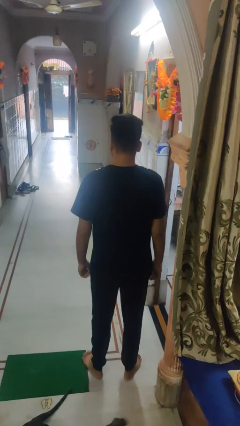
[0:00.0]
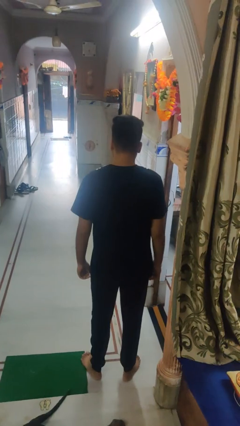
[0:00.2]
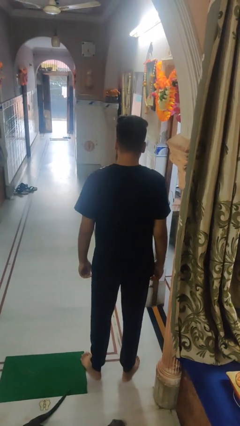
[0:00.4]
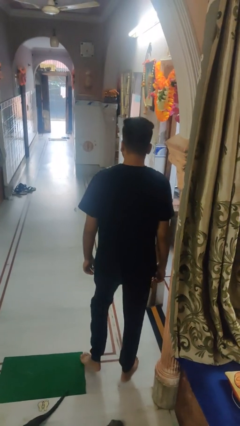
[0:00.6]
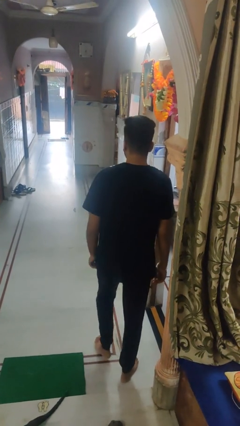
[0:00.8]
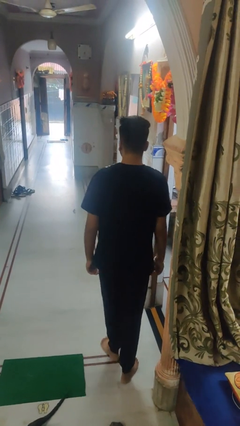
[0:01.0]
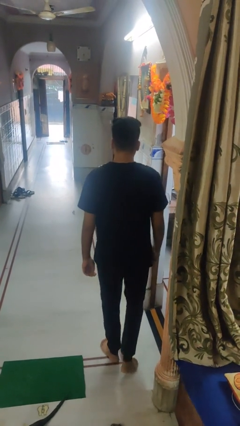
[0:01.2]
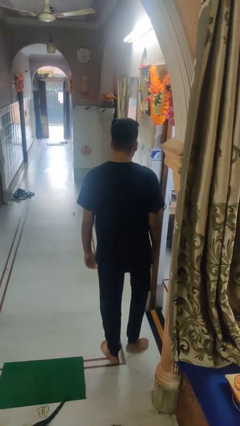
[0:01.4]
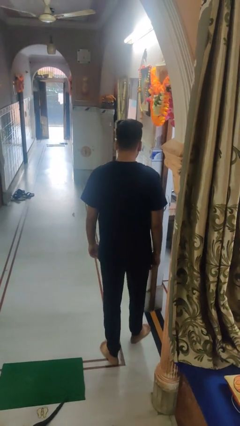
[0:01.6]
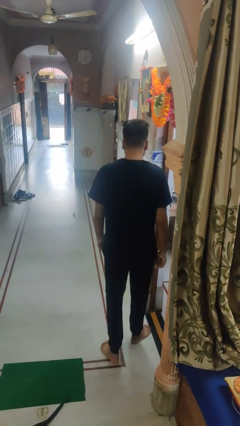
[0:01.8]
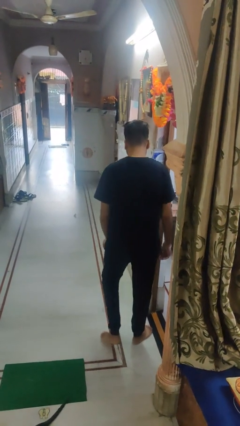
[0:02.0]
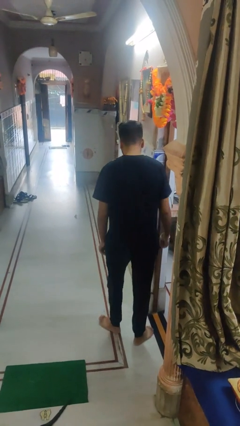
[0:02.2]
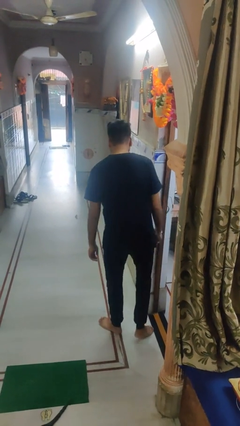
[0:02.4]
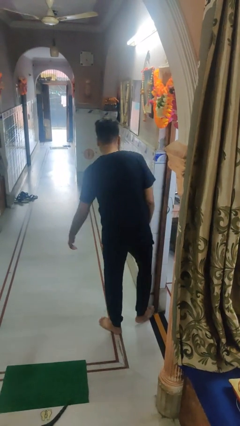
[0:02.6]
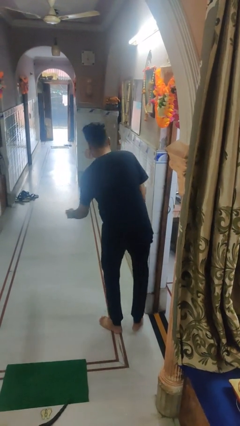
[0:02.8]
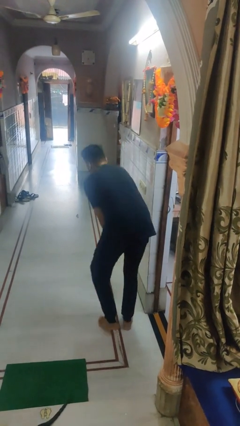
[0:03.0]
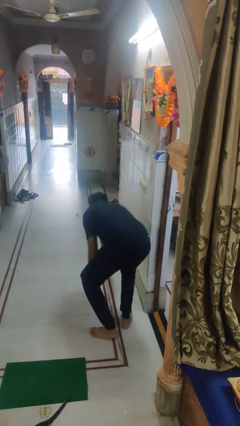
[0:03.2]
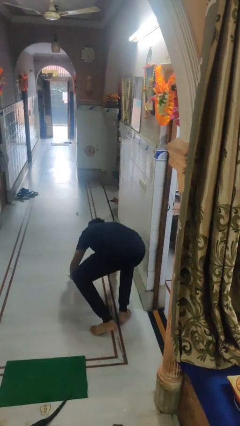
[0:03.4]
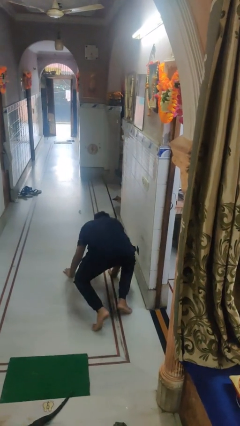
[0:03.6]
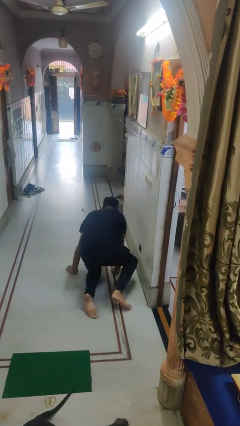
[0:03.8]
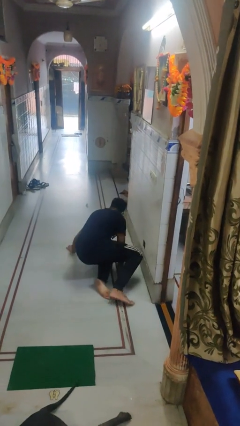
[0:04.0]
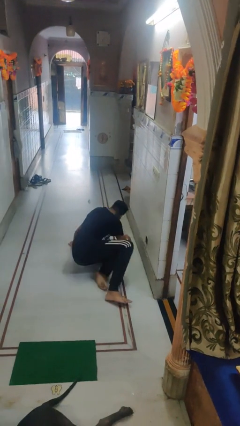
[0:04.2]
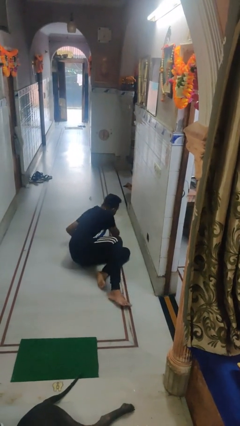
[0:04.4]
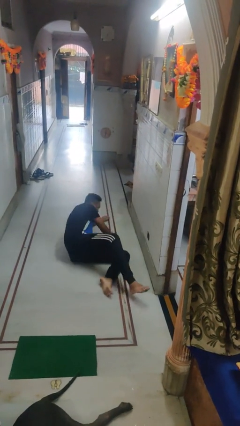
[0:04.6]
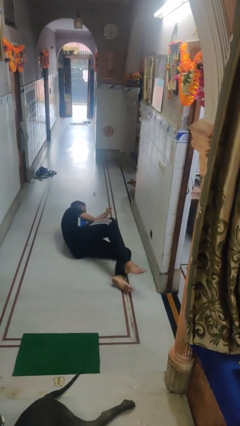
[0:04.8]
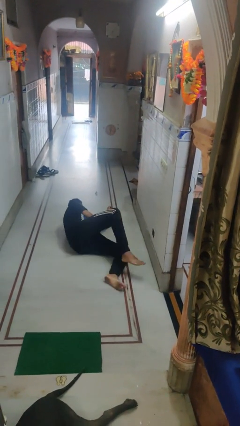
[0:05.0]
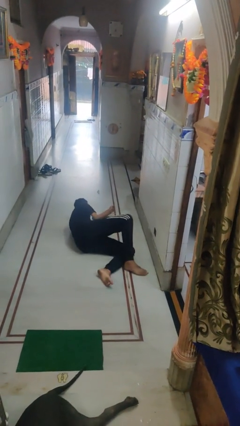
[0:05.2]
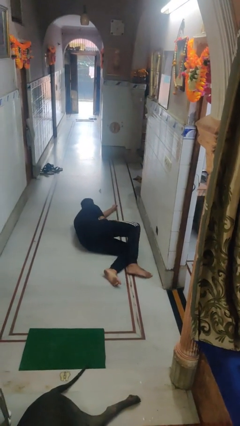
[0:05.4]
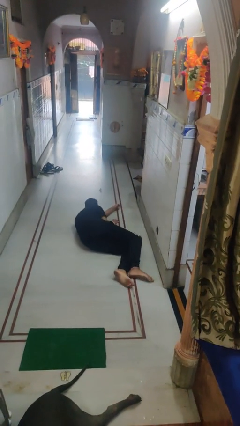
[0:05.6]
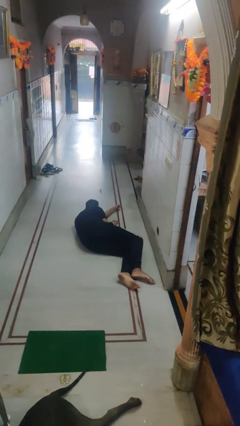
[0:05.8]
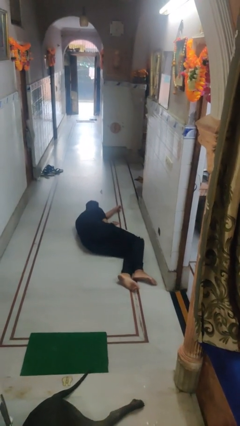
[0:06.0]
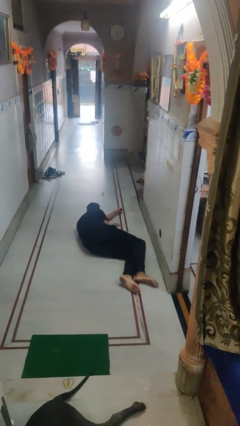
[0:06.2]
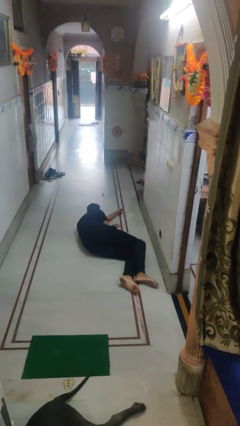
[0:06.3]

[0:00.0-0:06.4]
person trips on object on floor

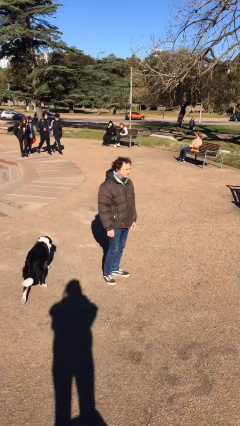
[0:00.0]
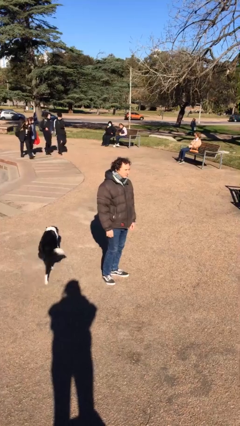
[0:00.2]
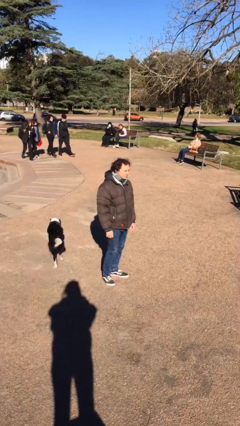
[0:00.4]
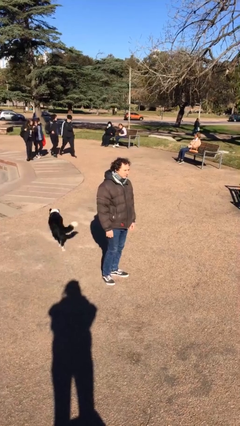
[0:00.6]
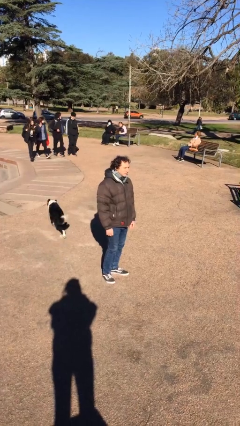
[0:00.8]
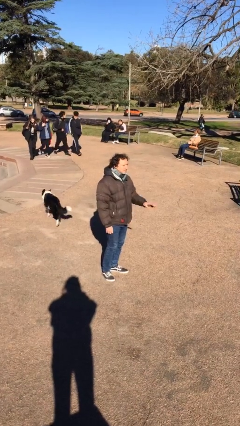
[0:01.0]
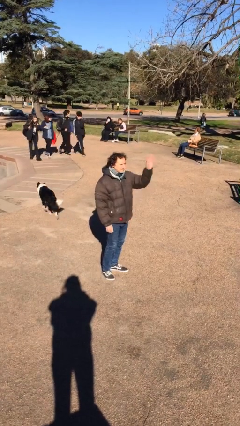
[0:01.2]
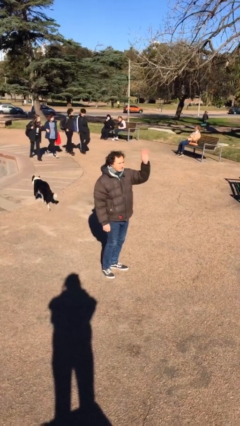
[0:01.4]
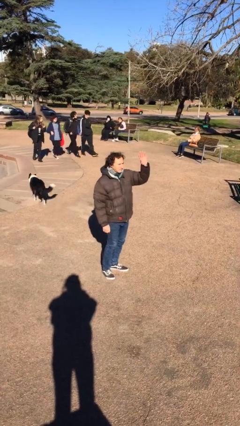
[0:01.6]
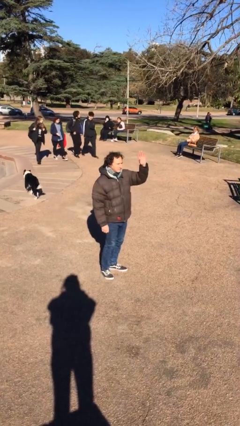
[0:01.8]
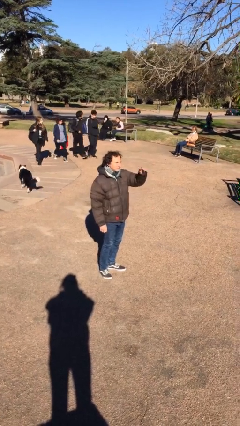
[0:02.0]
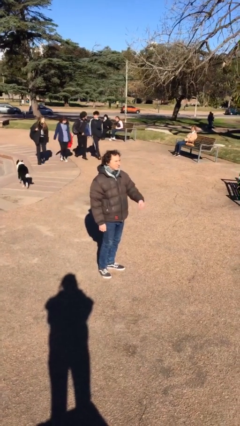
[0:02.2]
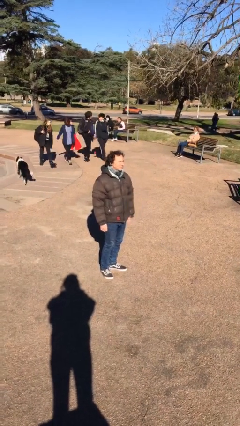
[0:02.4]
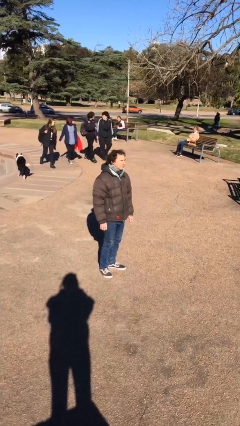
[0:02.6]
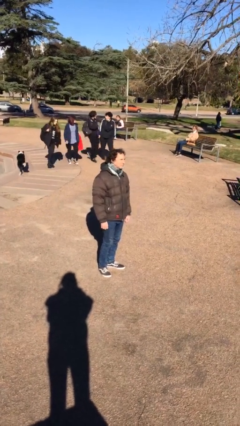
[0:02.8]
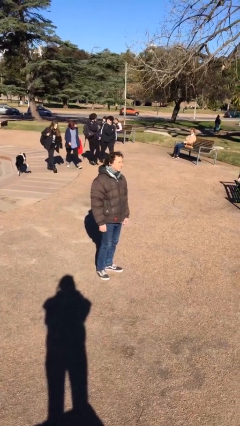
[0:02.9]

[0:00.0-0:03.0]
person waves at person

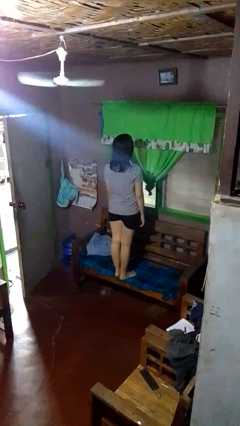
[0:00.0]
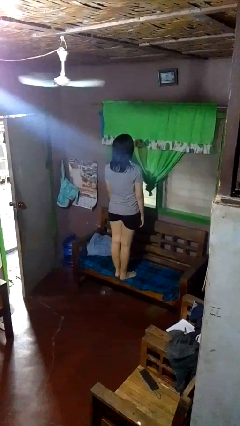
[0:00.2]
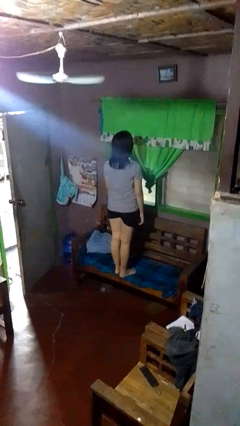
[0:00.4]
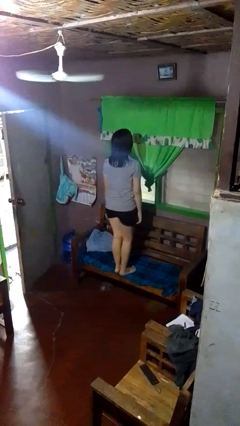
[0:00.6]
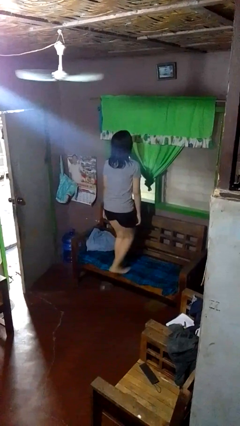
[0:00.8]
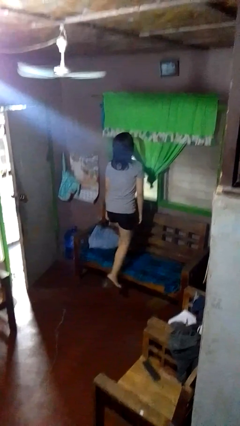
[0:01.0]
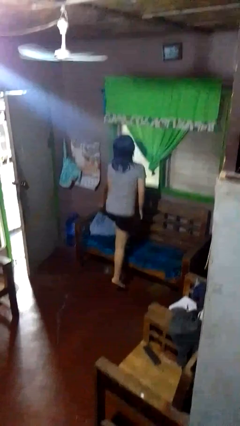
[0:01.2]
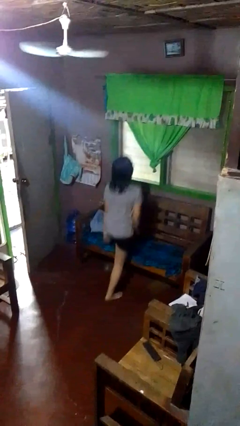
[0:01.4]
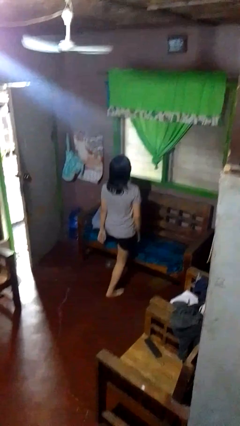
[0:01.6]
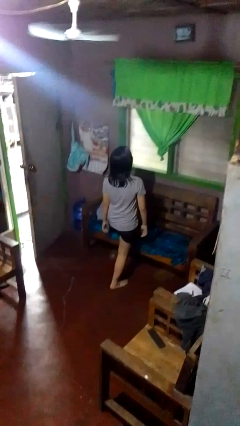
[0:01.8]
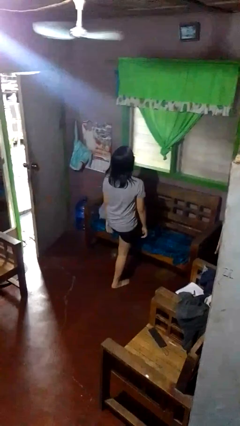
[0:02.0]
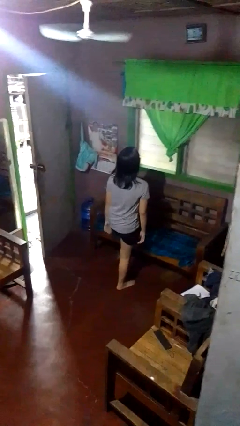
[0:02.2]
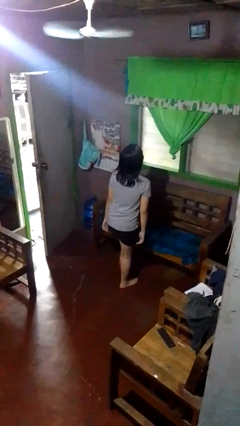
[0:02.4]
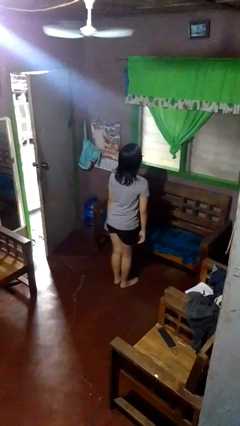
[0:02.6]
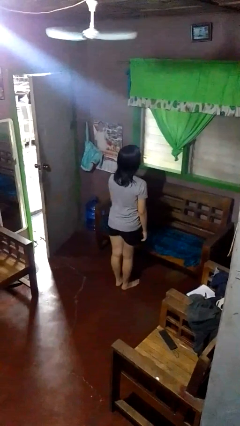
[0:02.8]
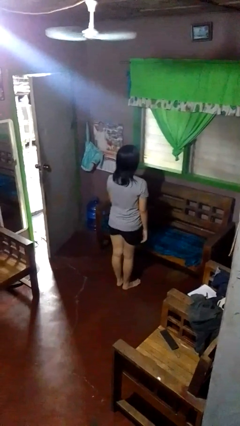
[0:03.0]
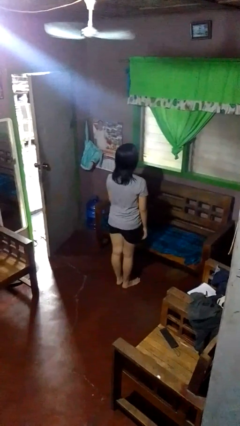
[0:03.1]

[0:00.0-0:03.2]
person climbs off couch

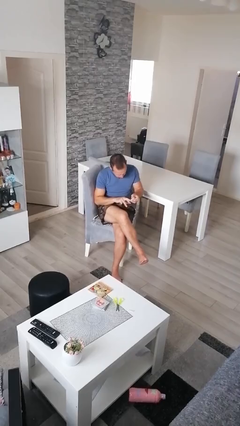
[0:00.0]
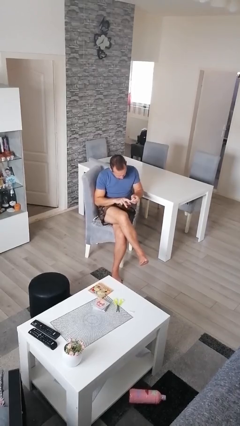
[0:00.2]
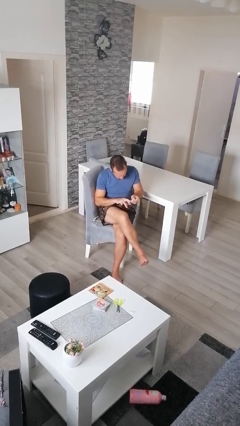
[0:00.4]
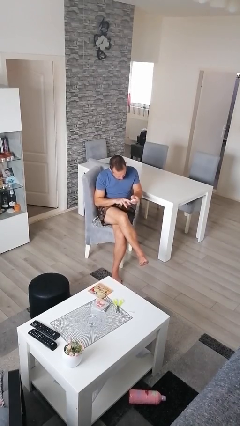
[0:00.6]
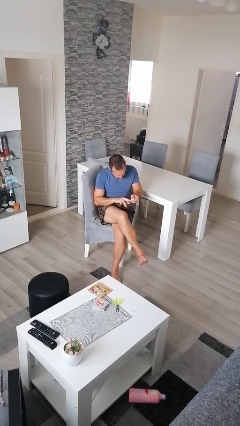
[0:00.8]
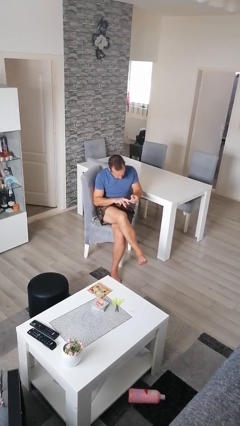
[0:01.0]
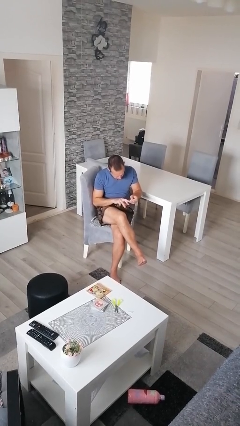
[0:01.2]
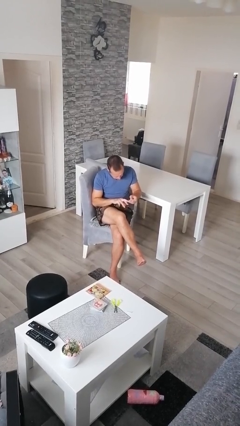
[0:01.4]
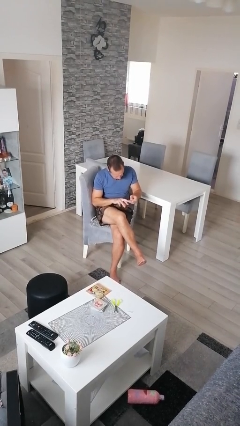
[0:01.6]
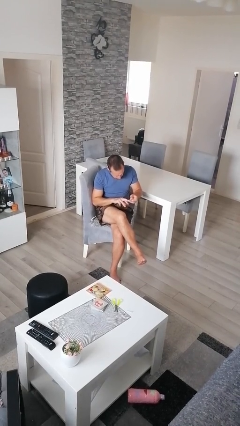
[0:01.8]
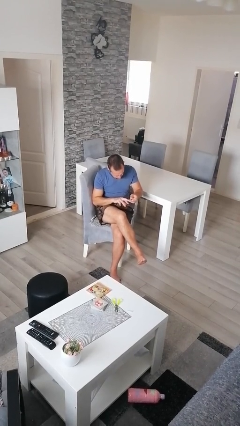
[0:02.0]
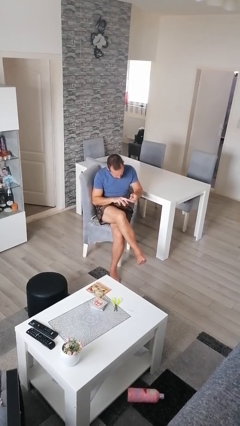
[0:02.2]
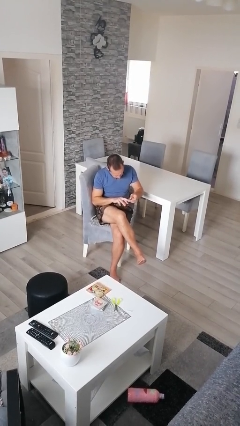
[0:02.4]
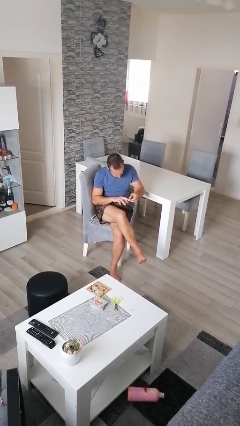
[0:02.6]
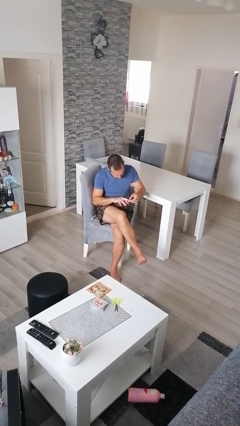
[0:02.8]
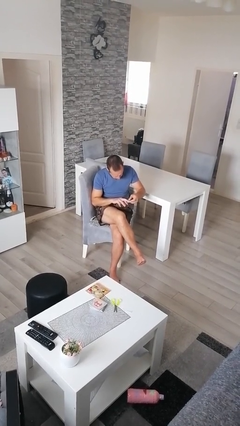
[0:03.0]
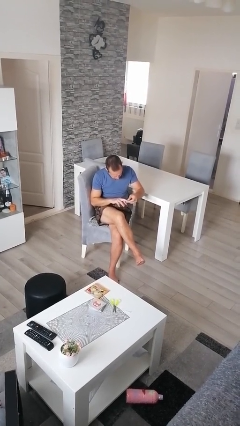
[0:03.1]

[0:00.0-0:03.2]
person clips fingernails

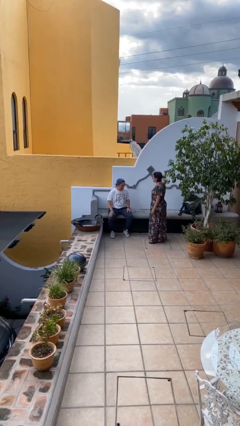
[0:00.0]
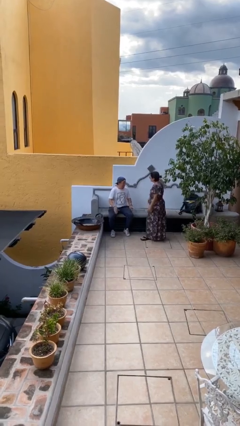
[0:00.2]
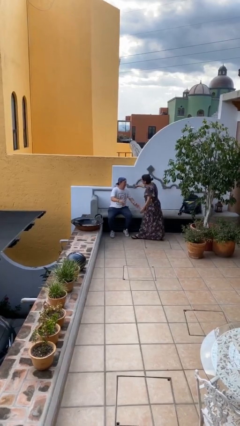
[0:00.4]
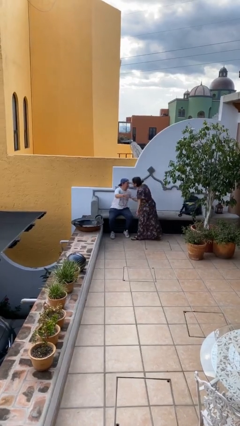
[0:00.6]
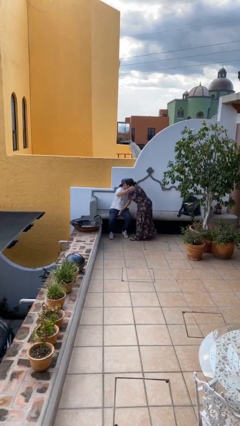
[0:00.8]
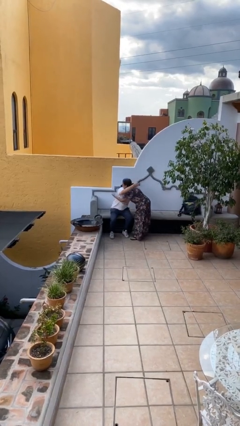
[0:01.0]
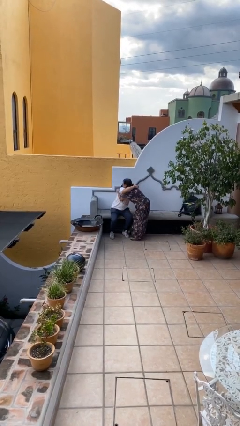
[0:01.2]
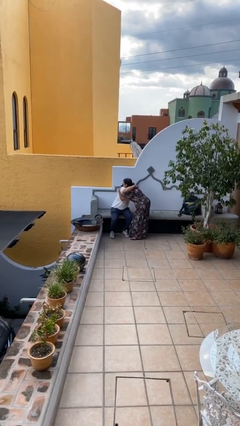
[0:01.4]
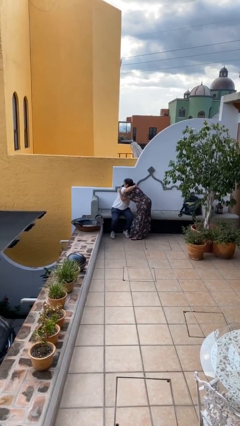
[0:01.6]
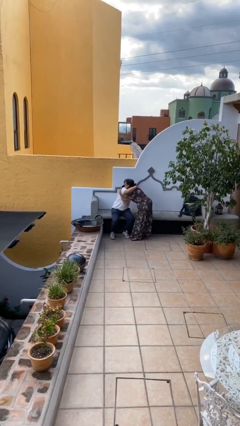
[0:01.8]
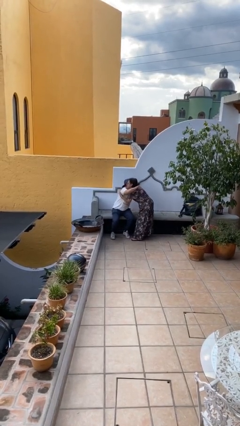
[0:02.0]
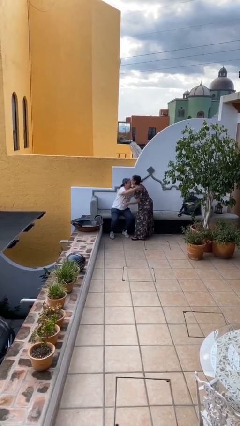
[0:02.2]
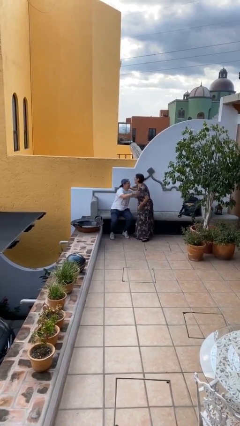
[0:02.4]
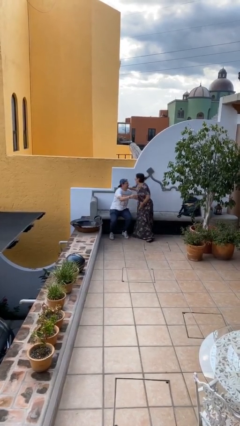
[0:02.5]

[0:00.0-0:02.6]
person embraces person
